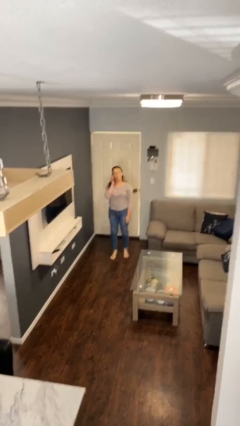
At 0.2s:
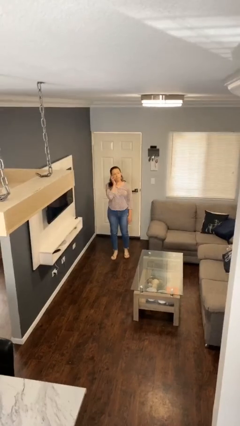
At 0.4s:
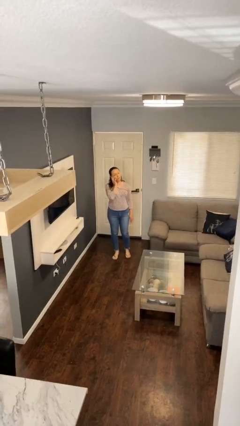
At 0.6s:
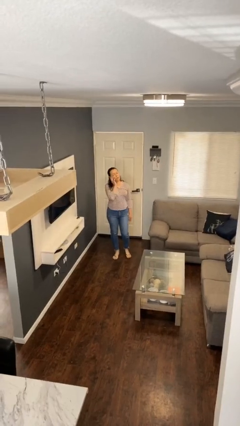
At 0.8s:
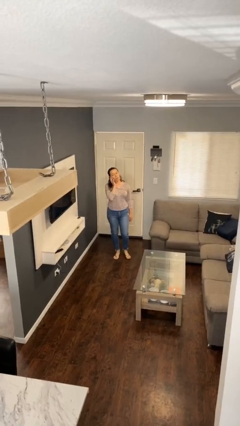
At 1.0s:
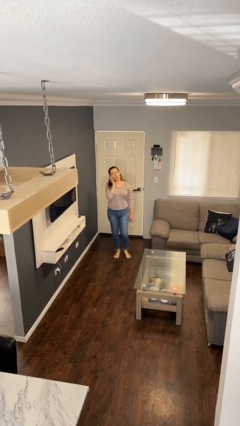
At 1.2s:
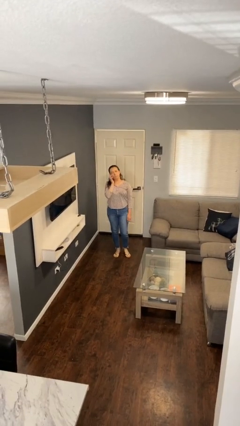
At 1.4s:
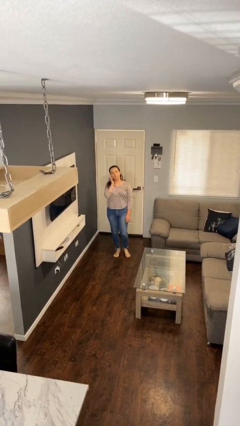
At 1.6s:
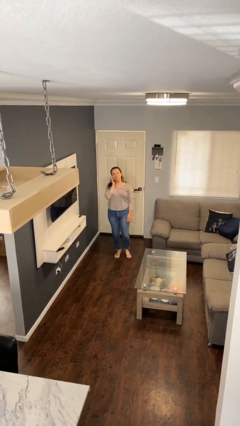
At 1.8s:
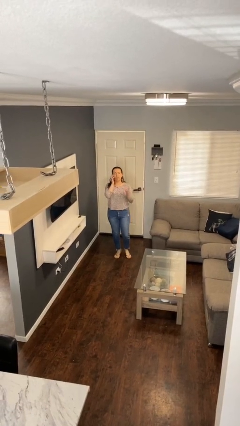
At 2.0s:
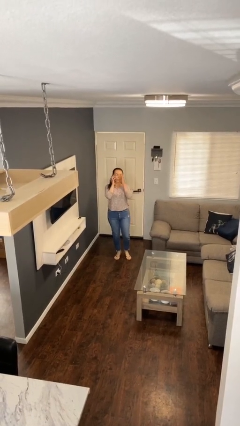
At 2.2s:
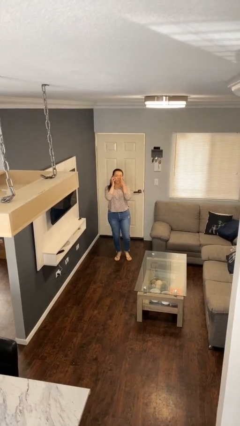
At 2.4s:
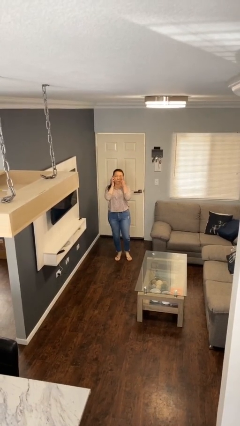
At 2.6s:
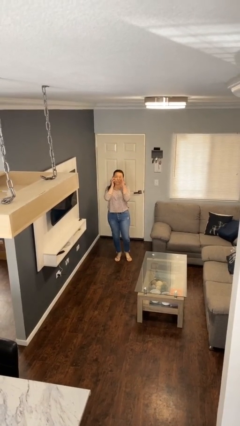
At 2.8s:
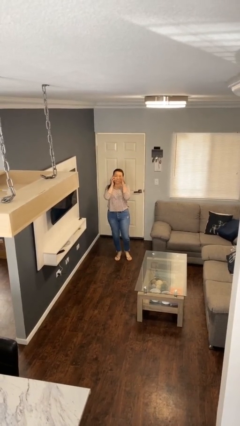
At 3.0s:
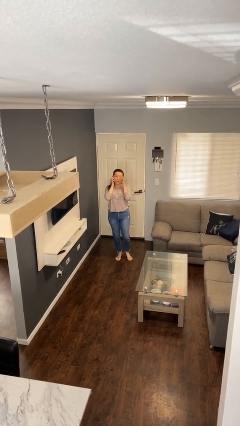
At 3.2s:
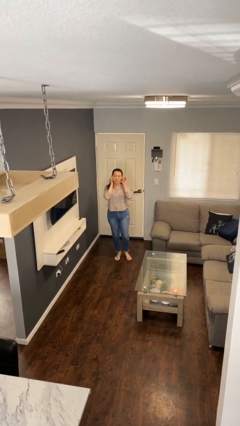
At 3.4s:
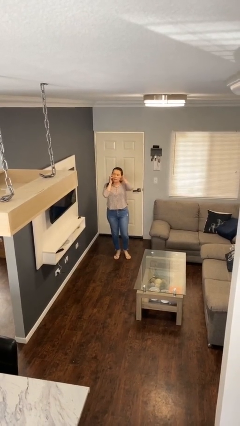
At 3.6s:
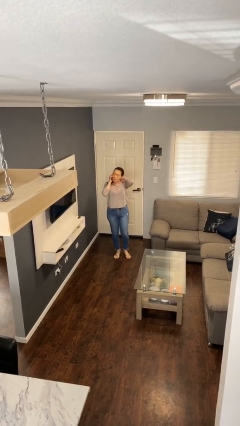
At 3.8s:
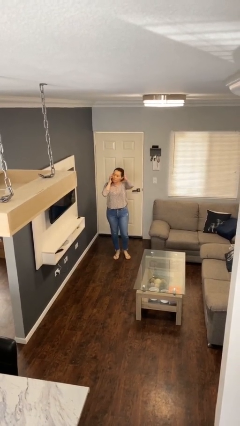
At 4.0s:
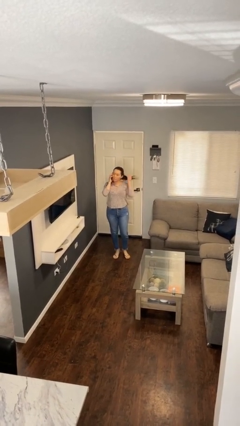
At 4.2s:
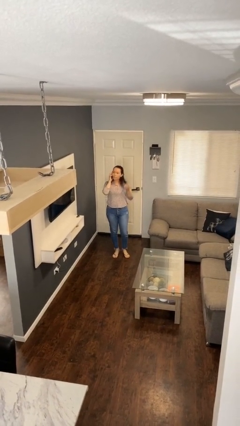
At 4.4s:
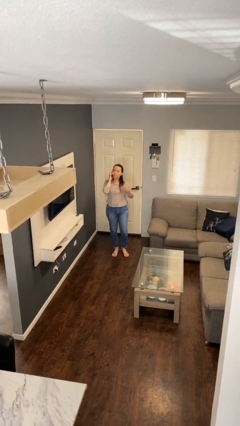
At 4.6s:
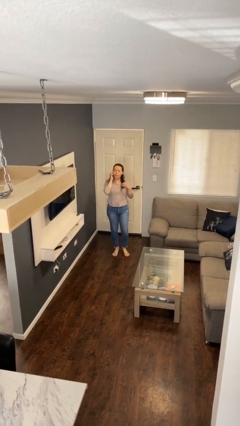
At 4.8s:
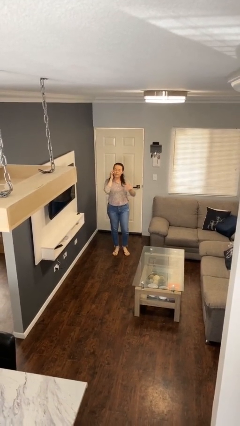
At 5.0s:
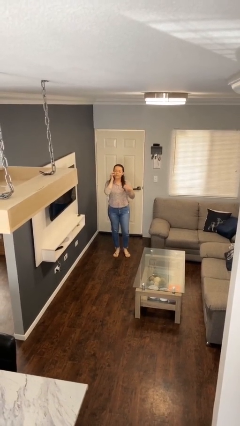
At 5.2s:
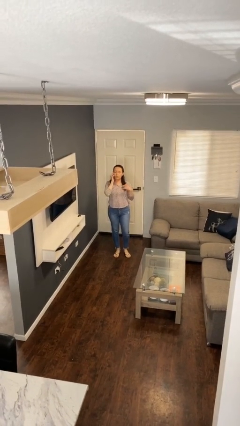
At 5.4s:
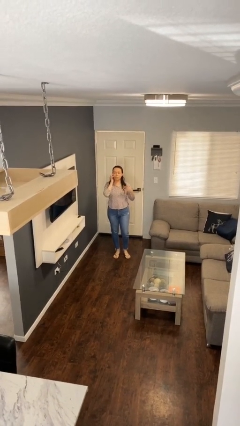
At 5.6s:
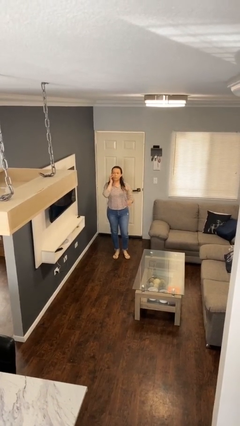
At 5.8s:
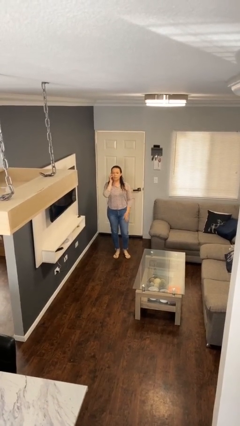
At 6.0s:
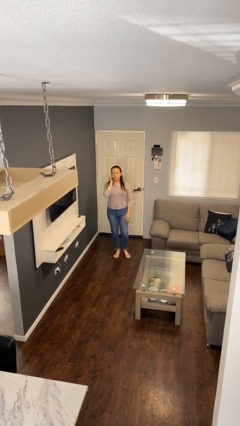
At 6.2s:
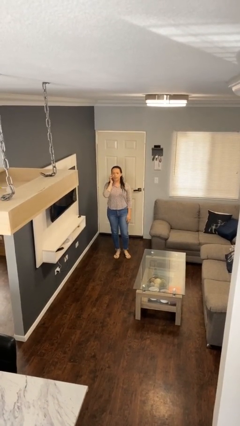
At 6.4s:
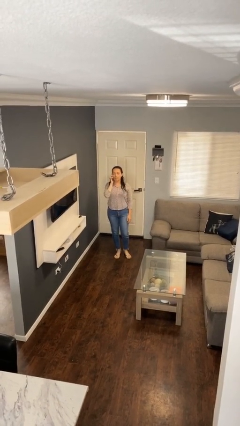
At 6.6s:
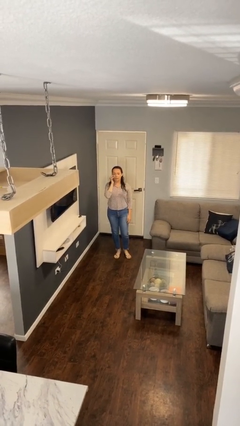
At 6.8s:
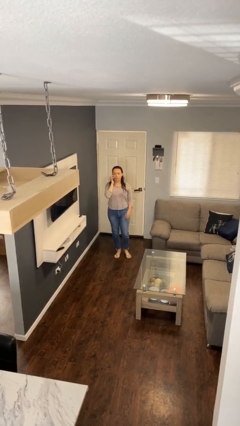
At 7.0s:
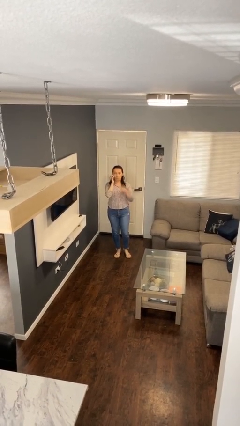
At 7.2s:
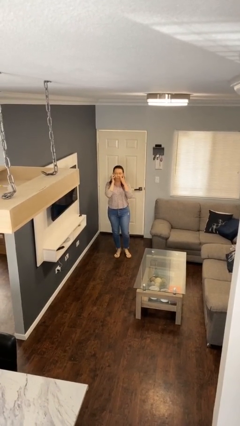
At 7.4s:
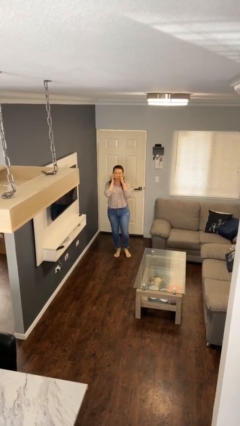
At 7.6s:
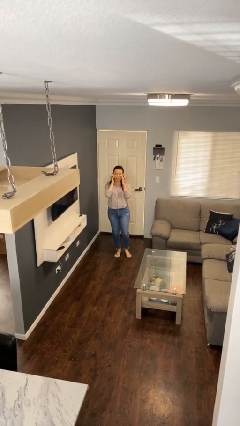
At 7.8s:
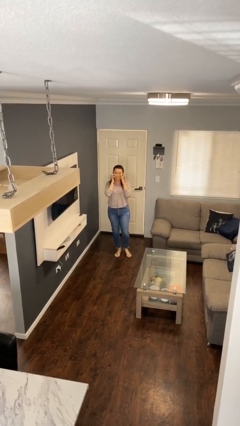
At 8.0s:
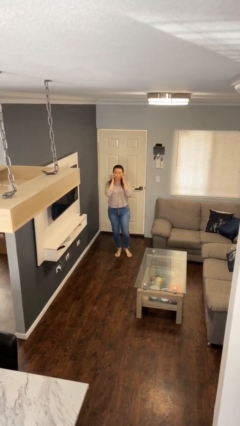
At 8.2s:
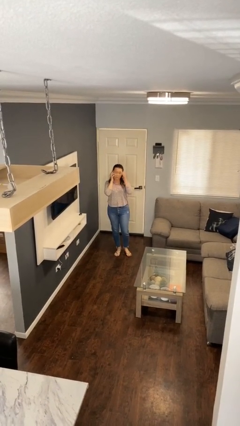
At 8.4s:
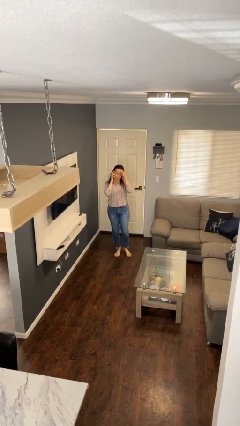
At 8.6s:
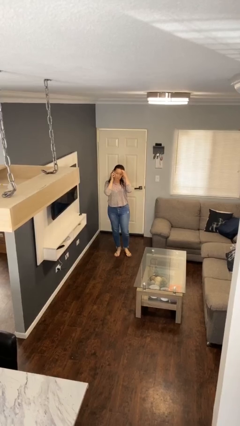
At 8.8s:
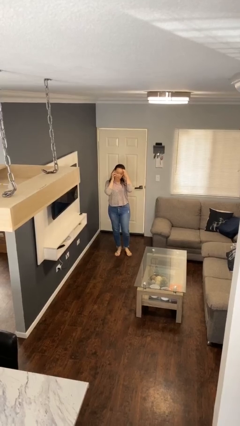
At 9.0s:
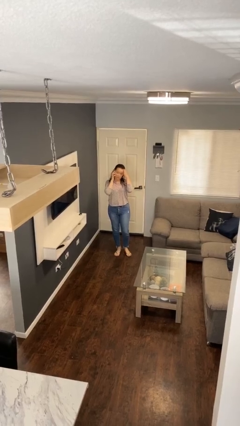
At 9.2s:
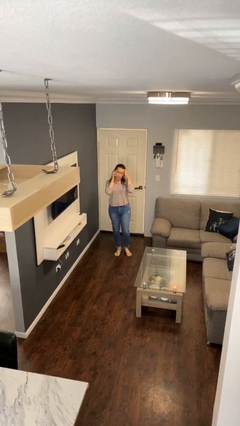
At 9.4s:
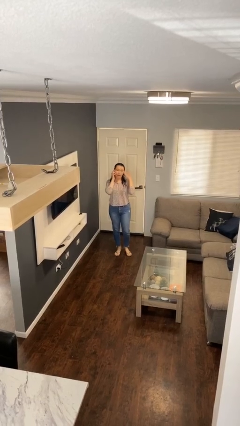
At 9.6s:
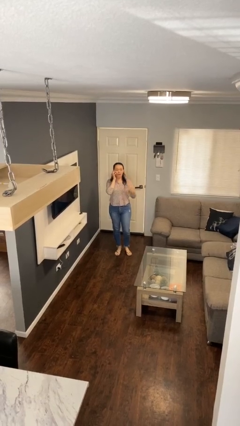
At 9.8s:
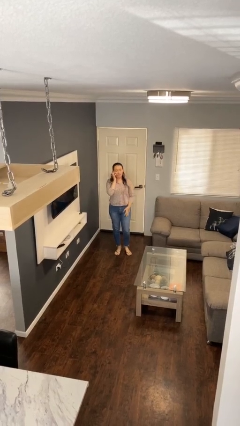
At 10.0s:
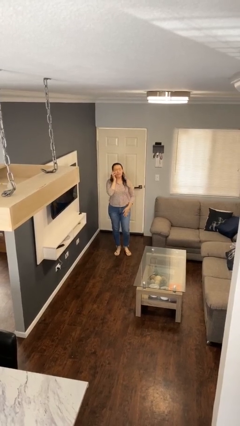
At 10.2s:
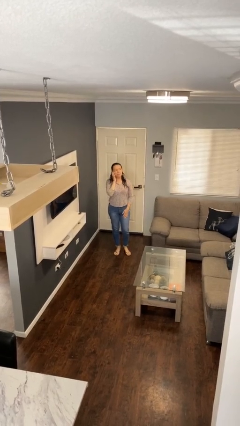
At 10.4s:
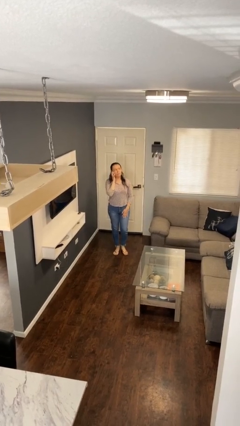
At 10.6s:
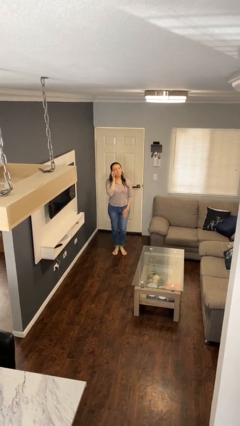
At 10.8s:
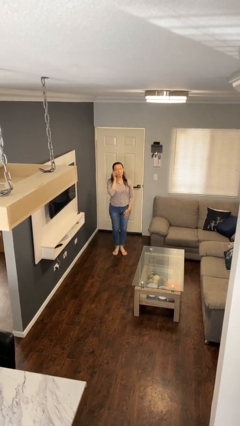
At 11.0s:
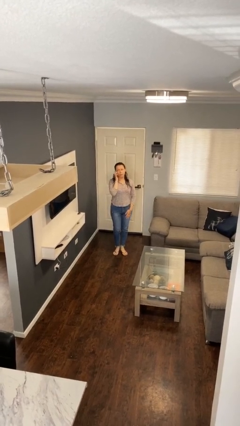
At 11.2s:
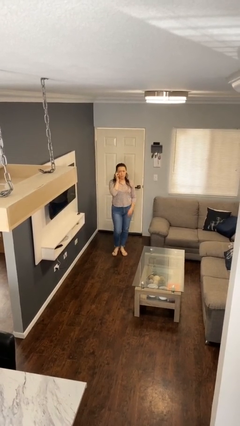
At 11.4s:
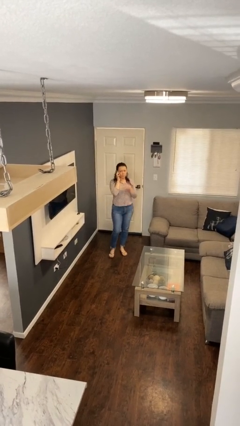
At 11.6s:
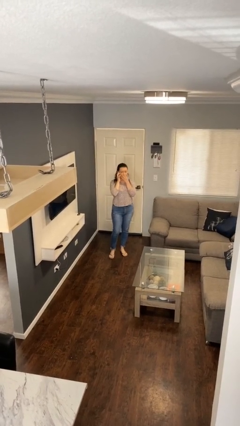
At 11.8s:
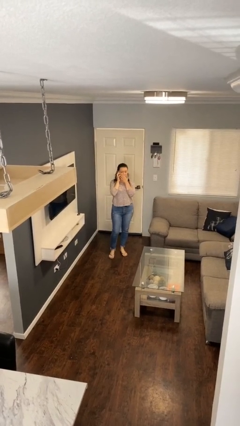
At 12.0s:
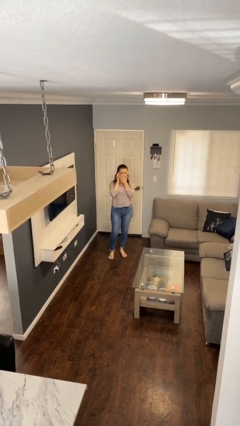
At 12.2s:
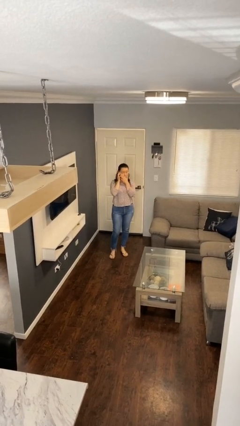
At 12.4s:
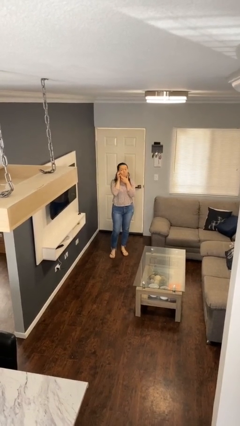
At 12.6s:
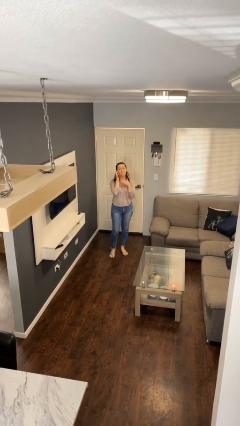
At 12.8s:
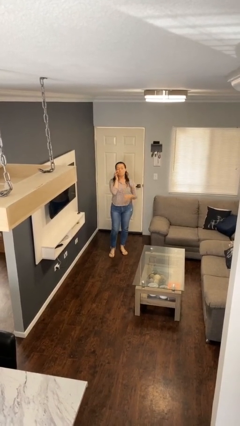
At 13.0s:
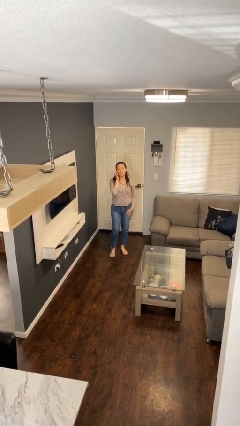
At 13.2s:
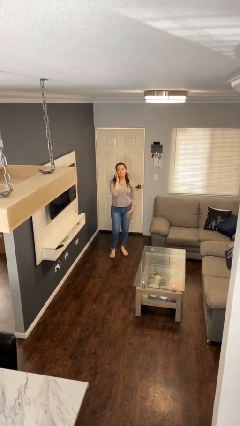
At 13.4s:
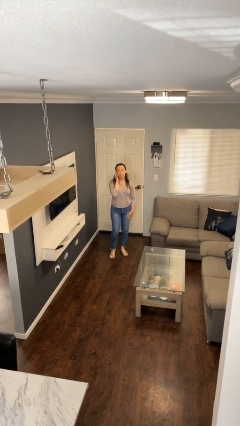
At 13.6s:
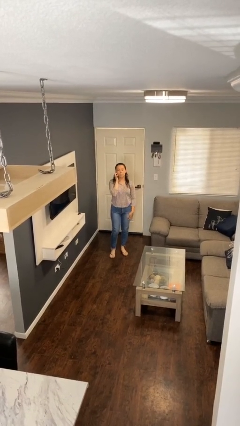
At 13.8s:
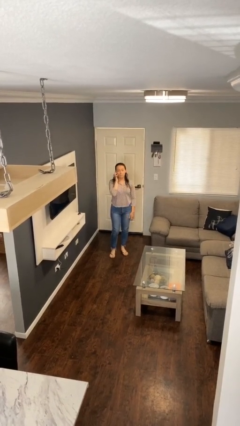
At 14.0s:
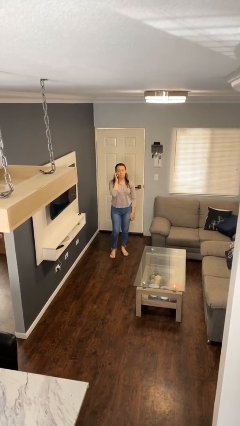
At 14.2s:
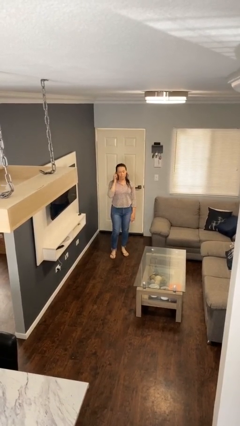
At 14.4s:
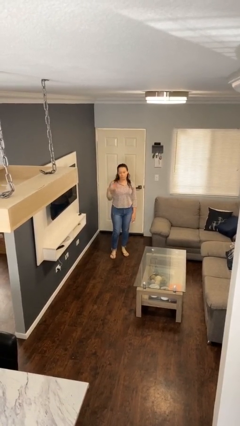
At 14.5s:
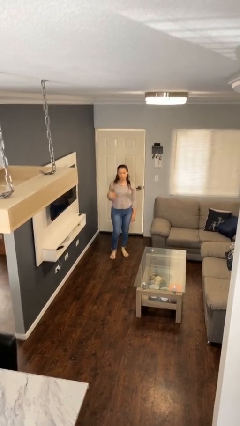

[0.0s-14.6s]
person talks on phone

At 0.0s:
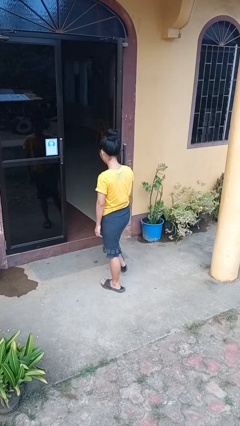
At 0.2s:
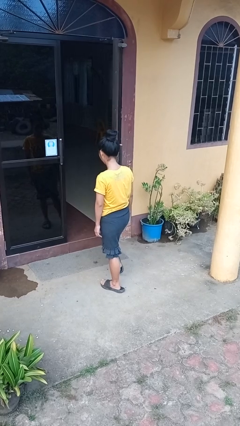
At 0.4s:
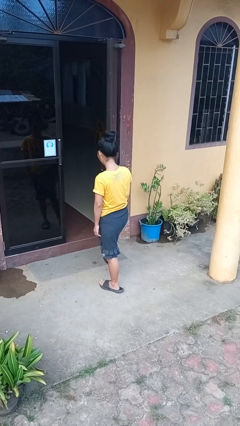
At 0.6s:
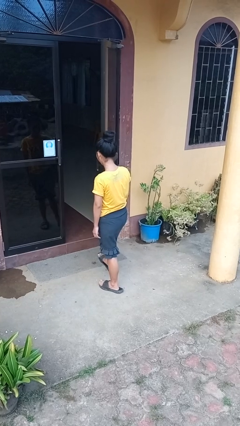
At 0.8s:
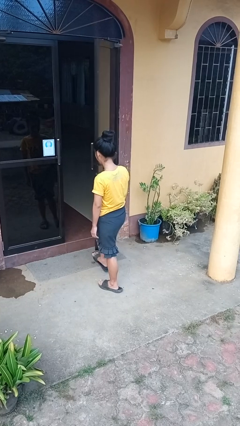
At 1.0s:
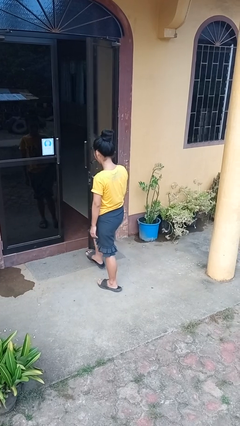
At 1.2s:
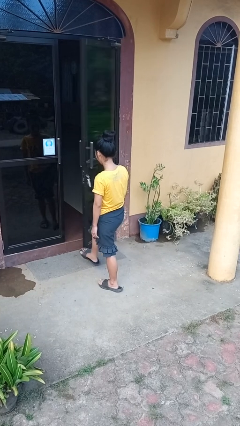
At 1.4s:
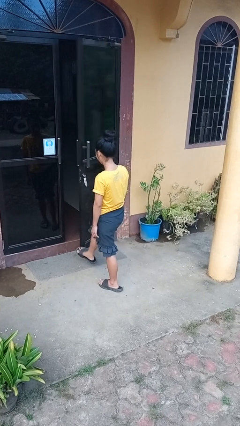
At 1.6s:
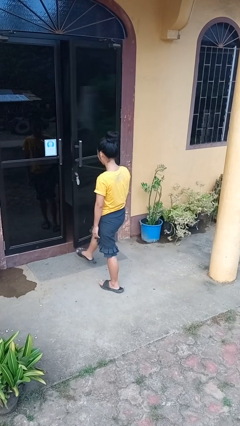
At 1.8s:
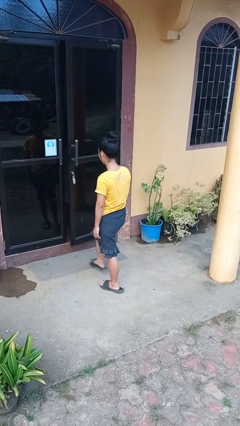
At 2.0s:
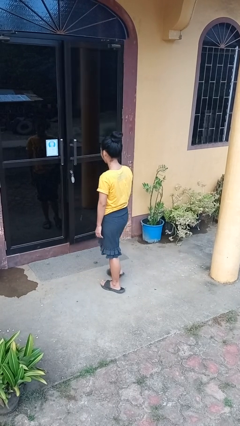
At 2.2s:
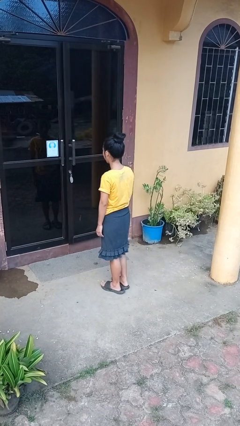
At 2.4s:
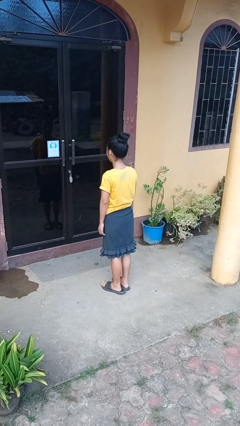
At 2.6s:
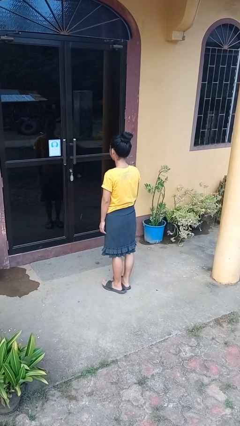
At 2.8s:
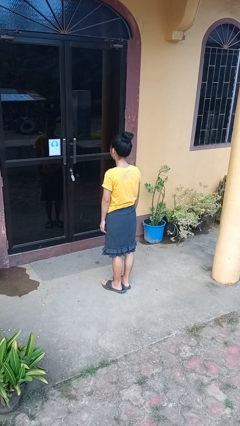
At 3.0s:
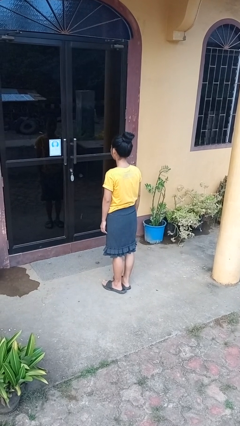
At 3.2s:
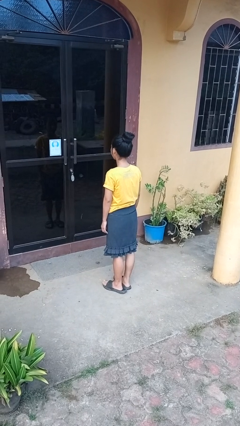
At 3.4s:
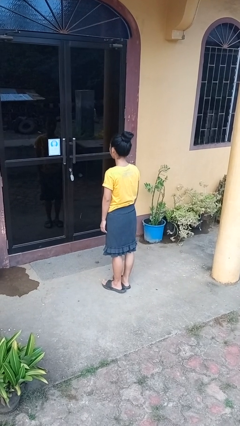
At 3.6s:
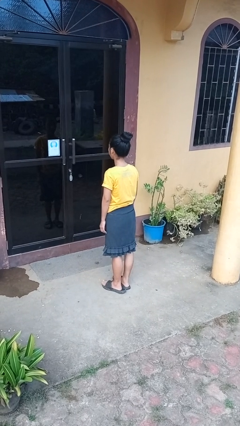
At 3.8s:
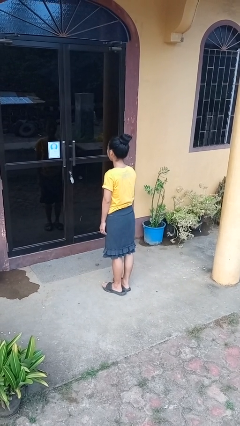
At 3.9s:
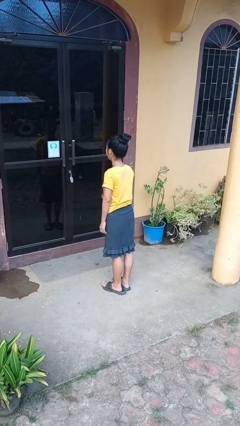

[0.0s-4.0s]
person closes door with foot
